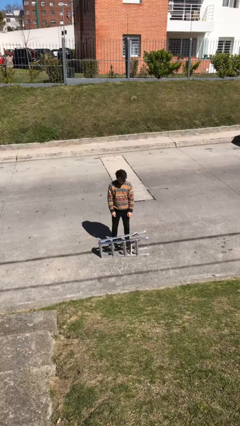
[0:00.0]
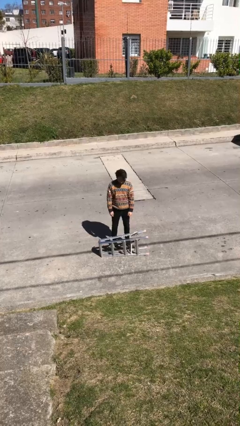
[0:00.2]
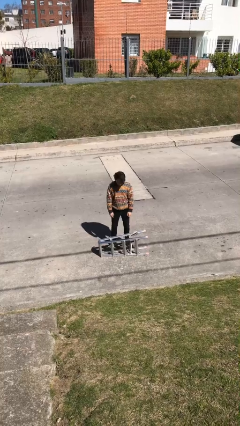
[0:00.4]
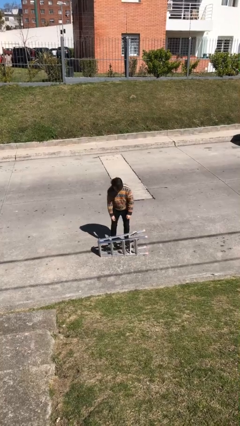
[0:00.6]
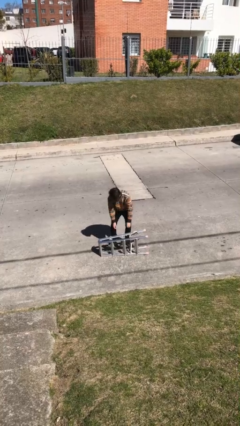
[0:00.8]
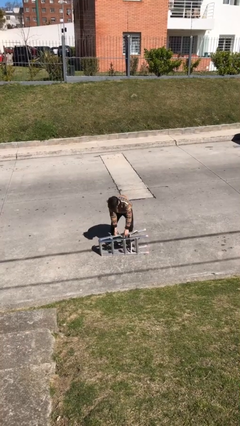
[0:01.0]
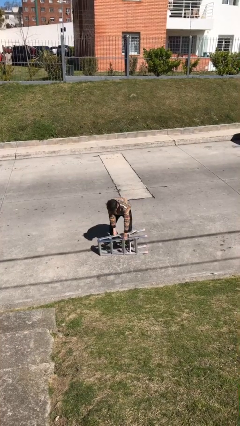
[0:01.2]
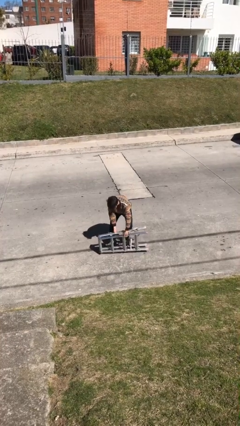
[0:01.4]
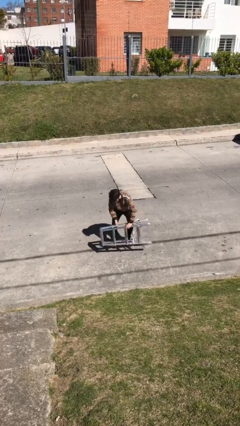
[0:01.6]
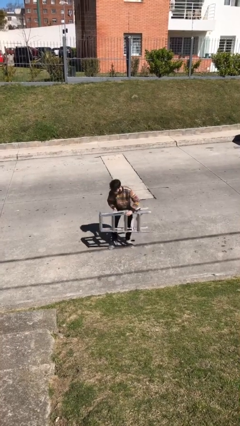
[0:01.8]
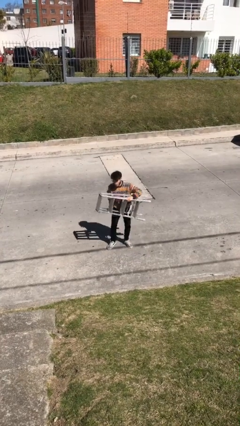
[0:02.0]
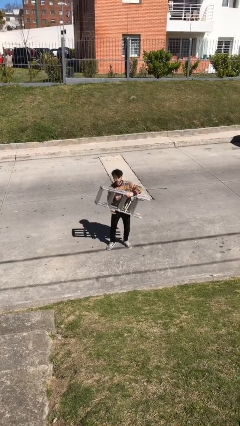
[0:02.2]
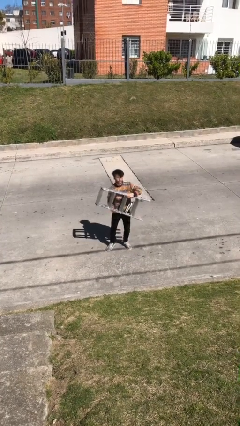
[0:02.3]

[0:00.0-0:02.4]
person picks up object from floor

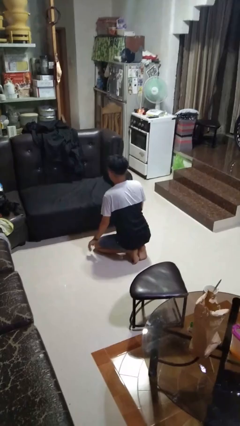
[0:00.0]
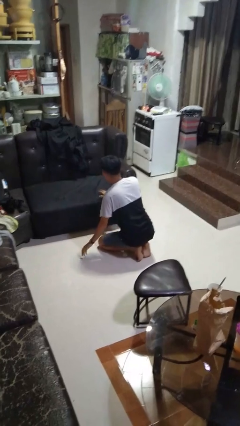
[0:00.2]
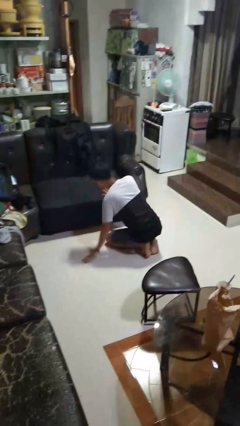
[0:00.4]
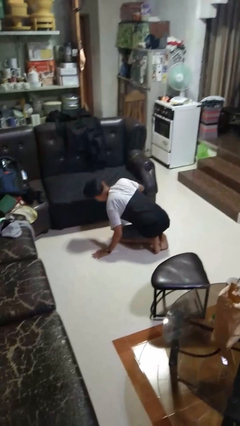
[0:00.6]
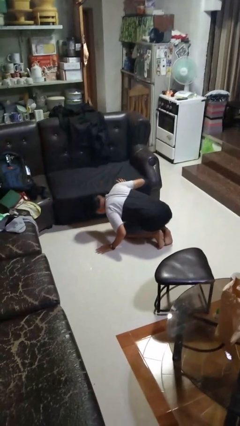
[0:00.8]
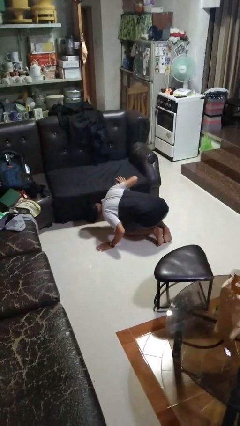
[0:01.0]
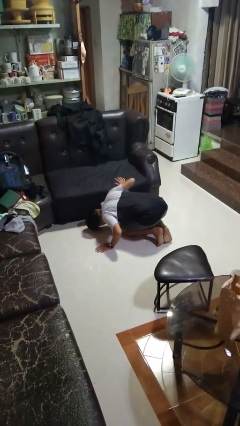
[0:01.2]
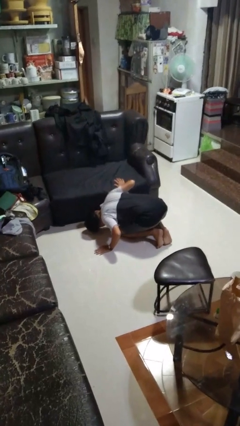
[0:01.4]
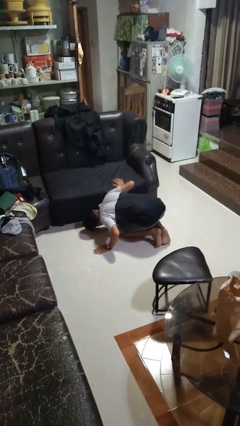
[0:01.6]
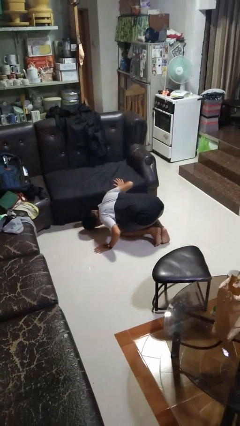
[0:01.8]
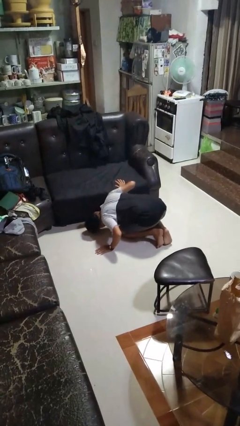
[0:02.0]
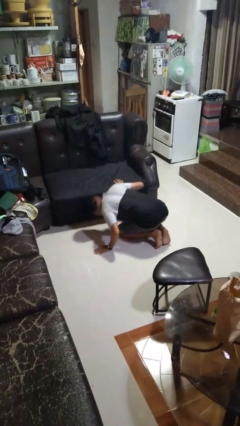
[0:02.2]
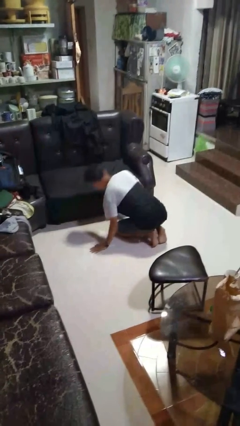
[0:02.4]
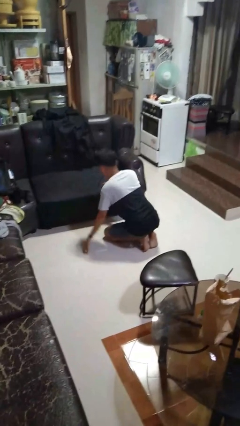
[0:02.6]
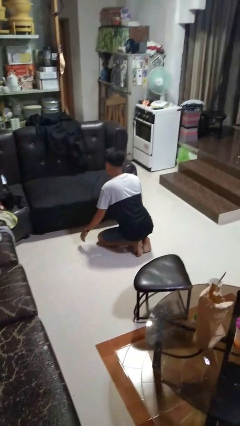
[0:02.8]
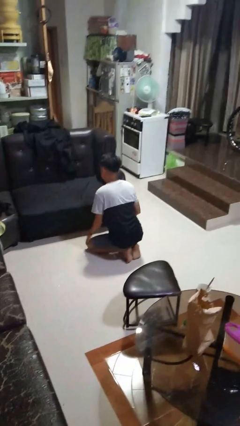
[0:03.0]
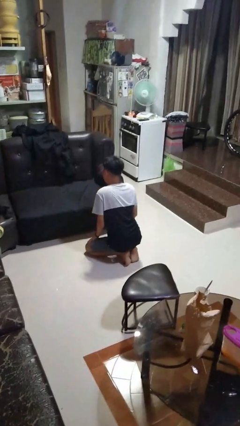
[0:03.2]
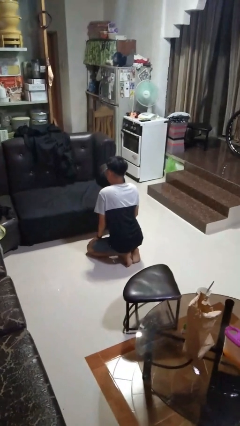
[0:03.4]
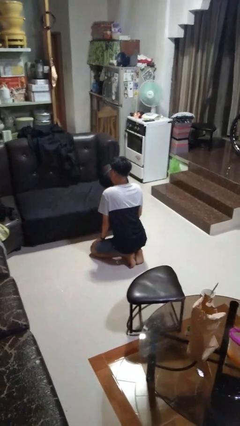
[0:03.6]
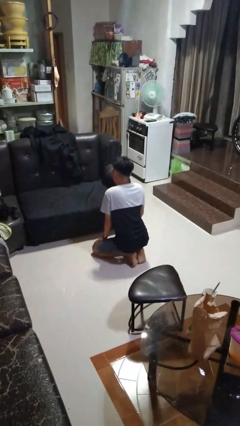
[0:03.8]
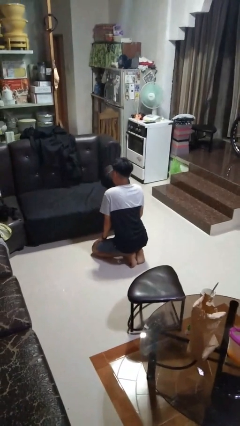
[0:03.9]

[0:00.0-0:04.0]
person searches under couch

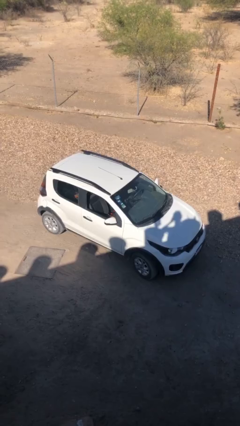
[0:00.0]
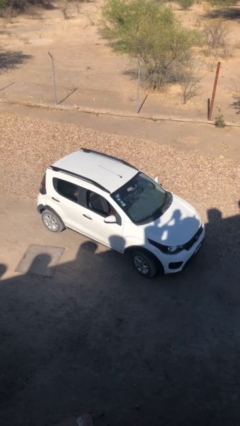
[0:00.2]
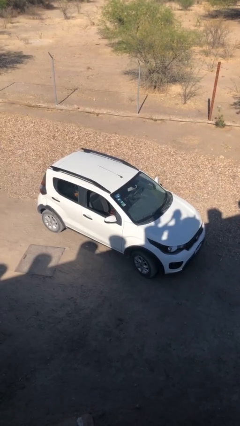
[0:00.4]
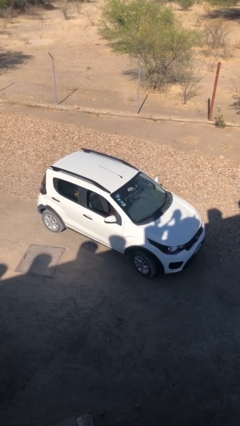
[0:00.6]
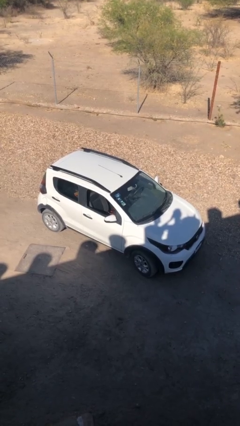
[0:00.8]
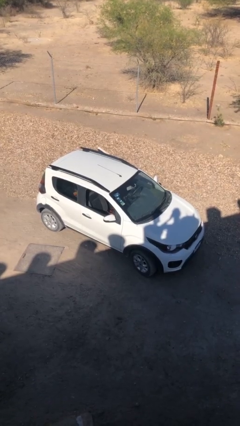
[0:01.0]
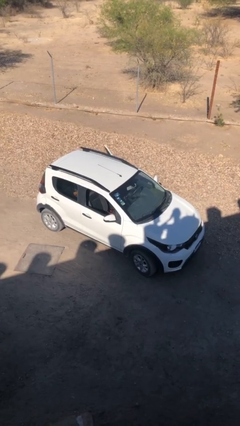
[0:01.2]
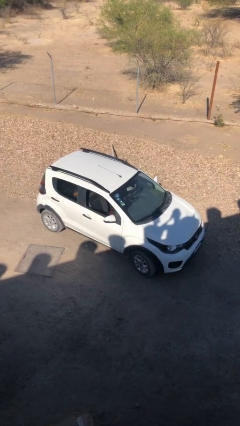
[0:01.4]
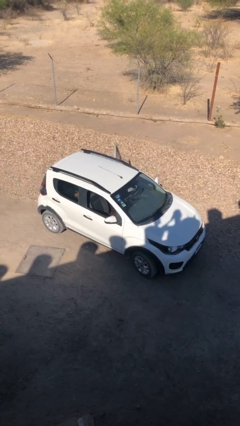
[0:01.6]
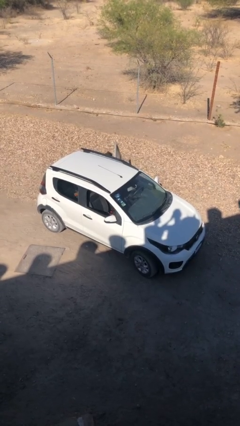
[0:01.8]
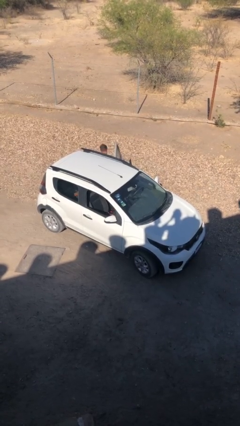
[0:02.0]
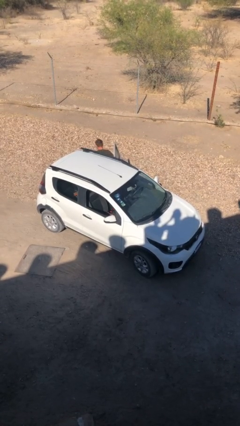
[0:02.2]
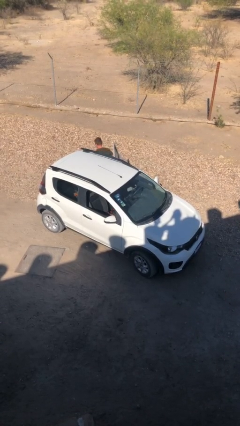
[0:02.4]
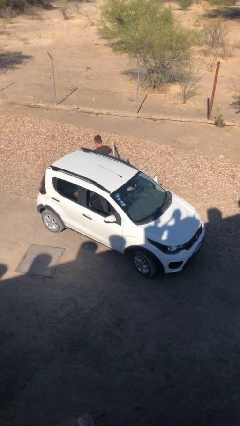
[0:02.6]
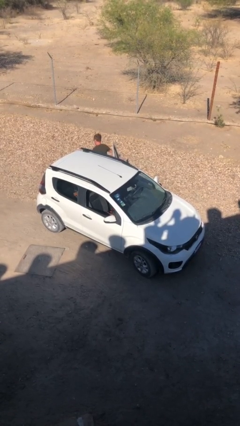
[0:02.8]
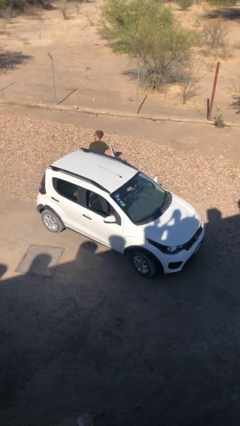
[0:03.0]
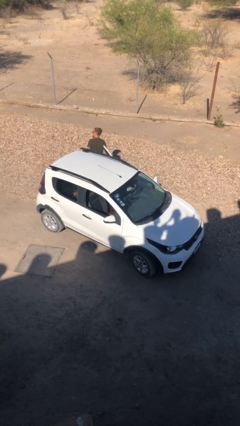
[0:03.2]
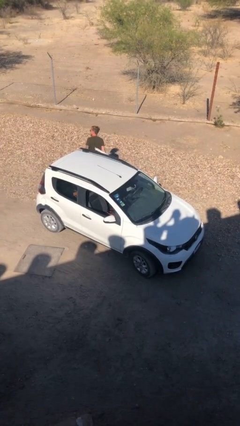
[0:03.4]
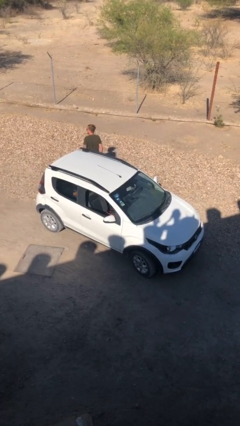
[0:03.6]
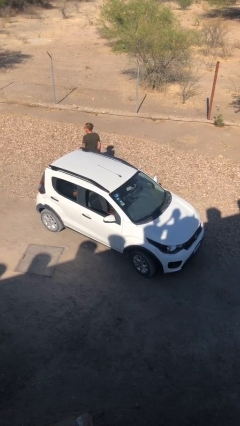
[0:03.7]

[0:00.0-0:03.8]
car drops off person

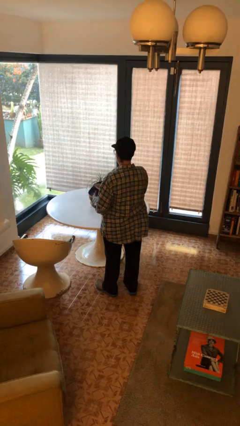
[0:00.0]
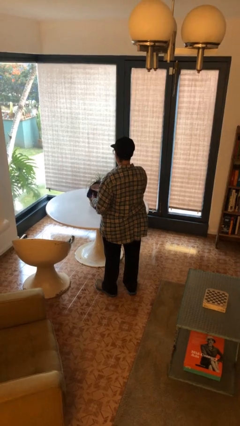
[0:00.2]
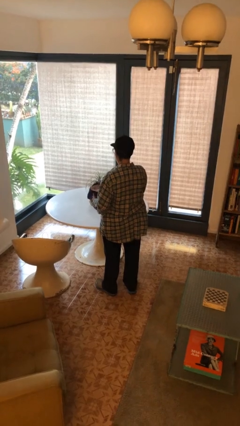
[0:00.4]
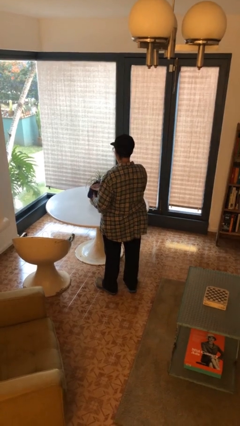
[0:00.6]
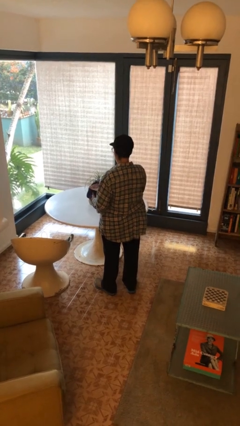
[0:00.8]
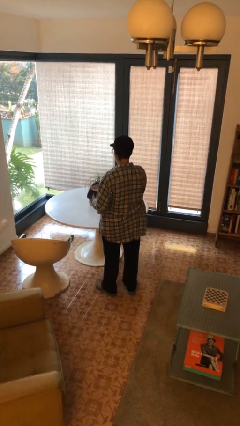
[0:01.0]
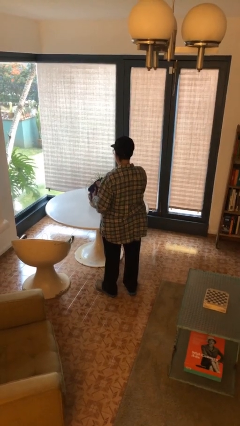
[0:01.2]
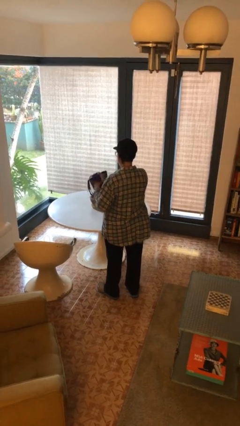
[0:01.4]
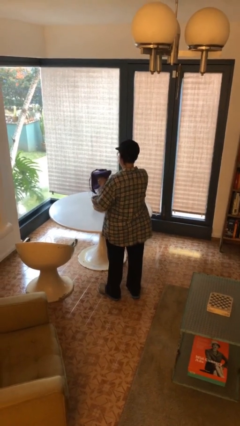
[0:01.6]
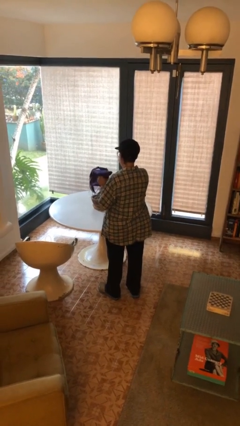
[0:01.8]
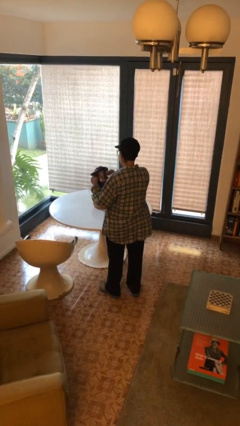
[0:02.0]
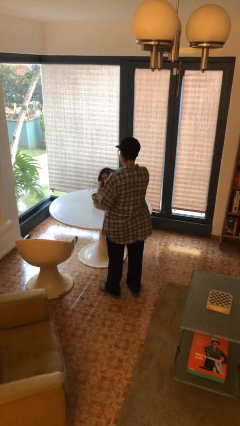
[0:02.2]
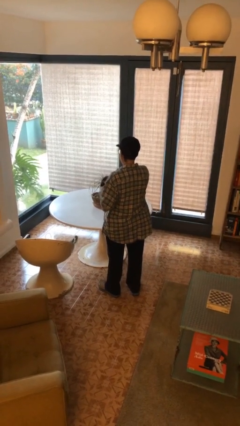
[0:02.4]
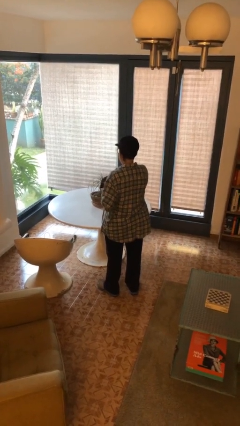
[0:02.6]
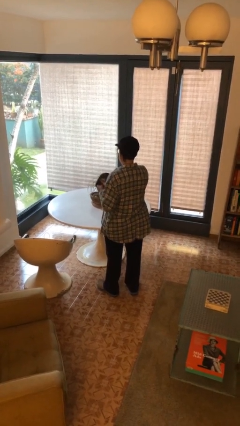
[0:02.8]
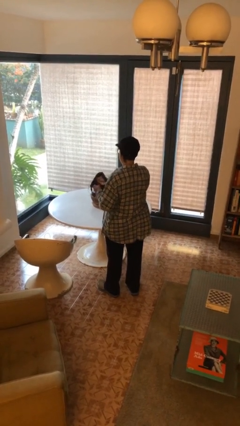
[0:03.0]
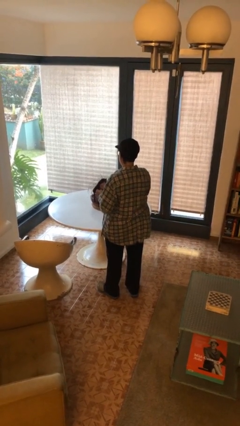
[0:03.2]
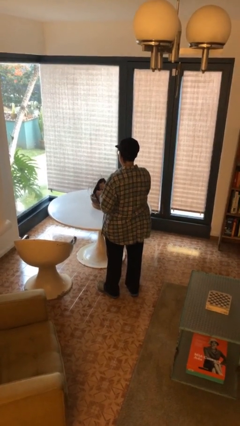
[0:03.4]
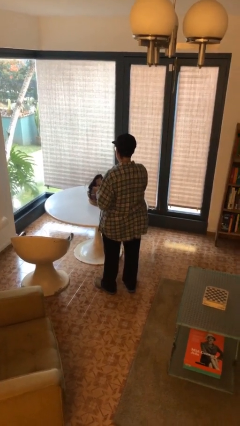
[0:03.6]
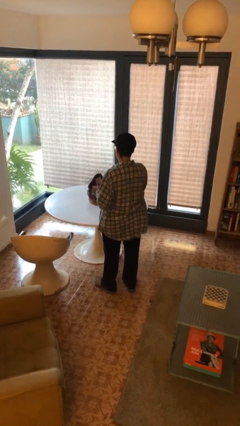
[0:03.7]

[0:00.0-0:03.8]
person squeezes object

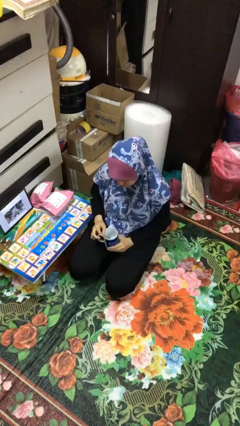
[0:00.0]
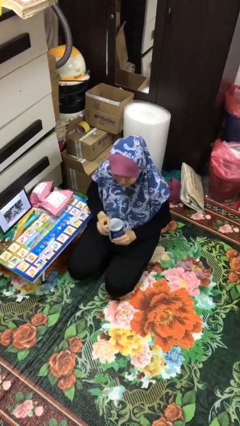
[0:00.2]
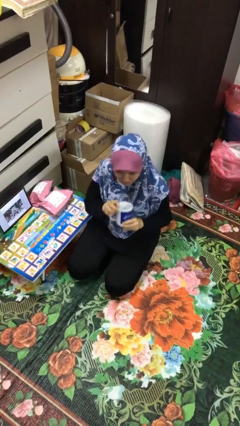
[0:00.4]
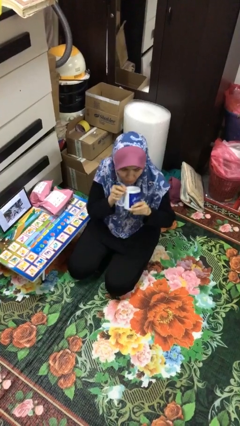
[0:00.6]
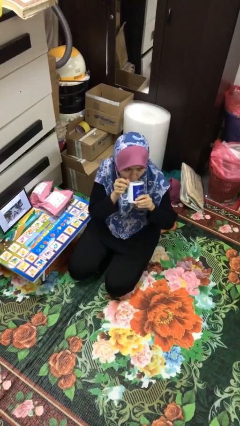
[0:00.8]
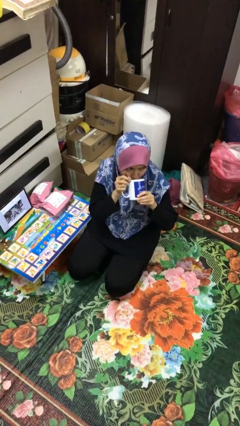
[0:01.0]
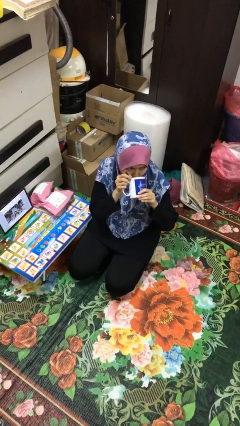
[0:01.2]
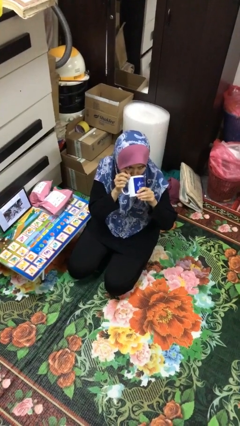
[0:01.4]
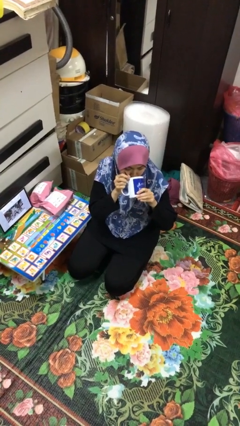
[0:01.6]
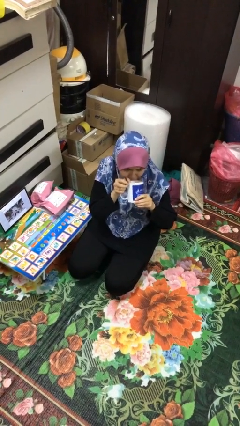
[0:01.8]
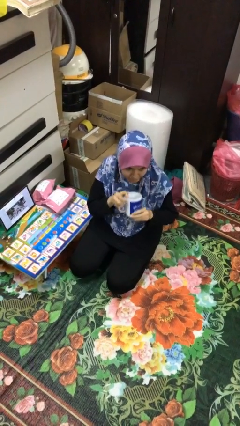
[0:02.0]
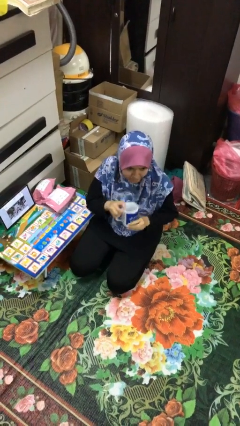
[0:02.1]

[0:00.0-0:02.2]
person drinks from mug

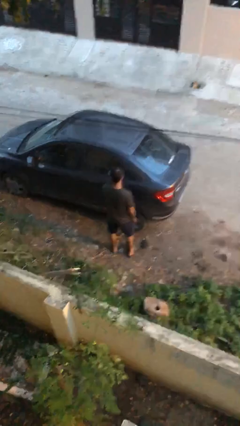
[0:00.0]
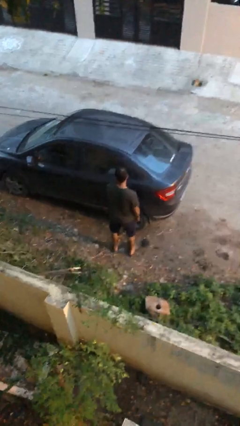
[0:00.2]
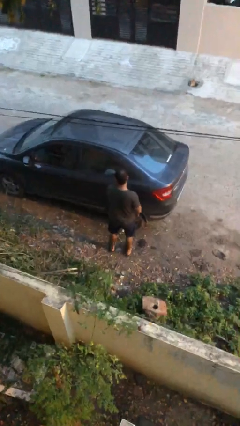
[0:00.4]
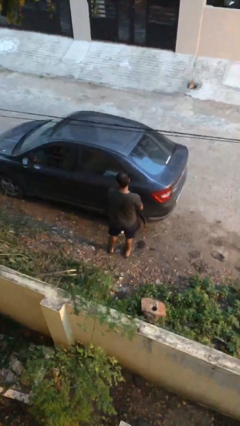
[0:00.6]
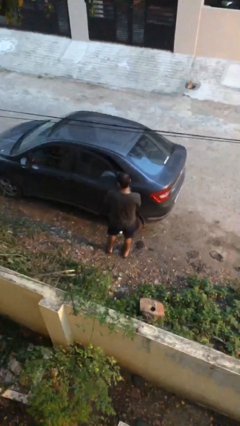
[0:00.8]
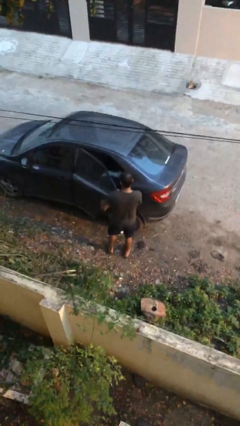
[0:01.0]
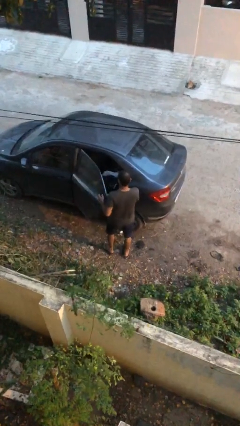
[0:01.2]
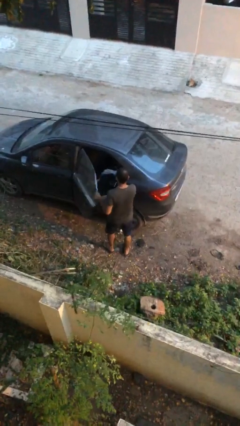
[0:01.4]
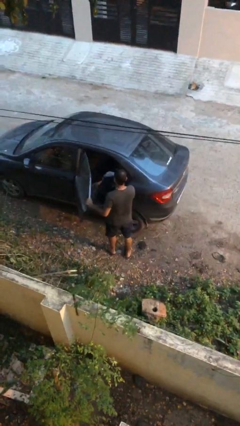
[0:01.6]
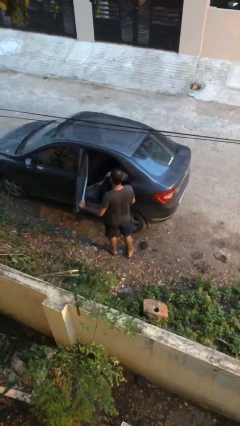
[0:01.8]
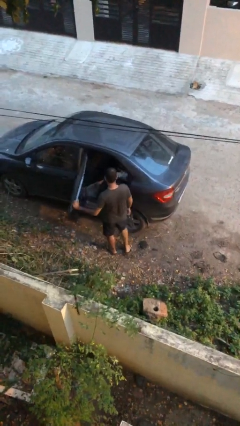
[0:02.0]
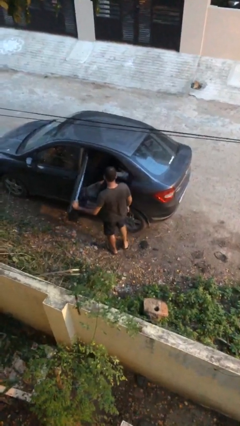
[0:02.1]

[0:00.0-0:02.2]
person opens car door
